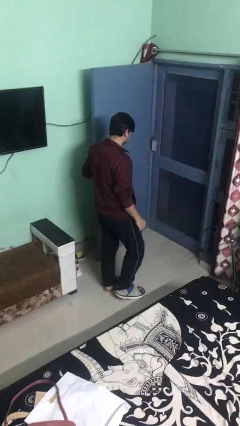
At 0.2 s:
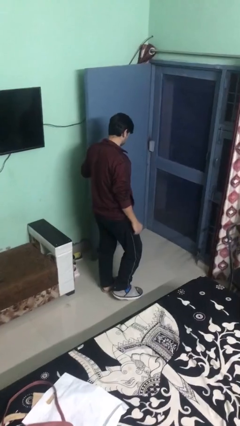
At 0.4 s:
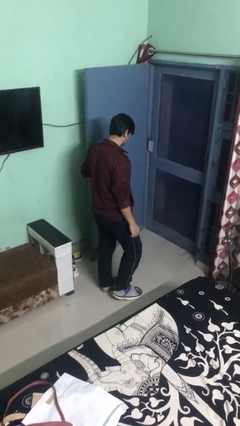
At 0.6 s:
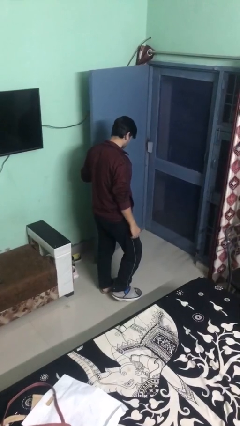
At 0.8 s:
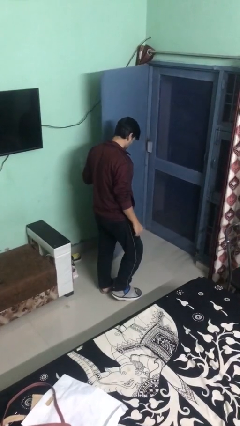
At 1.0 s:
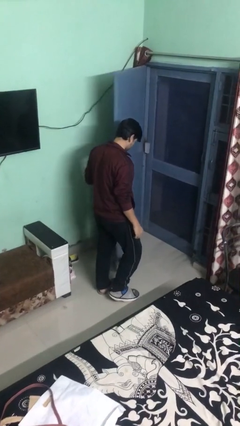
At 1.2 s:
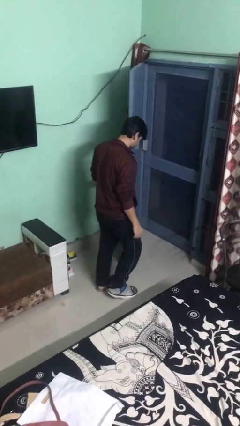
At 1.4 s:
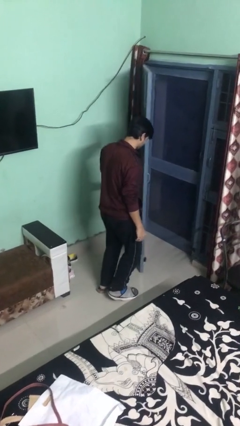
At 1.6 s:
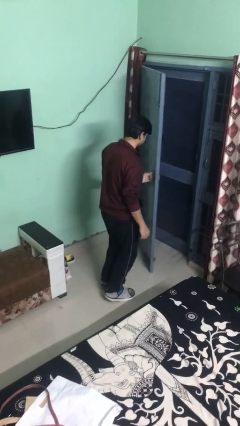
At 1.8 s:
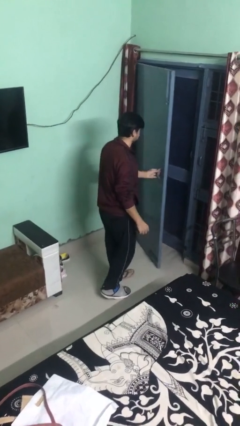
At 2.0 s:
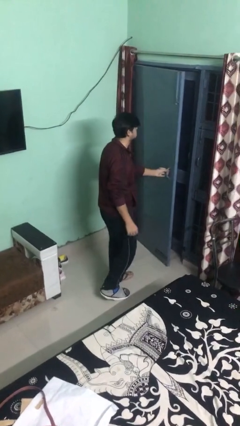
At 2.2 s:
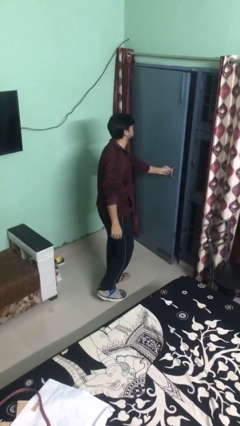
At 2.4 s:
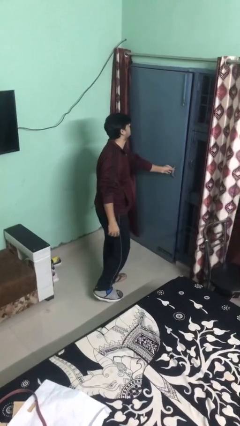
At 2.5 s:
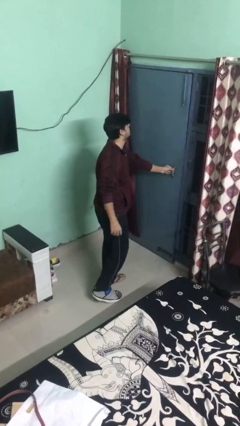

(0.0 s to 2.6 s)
person closes facility door

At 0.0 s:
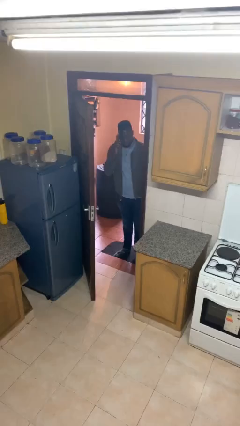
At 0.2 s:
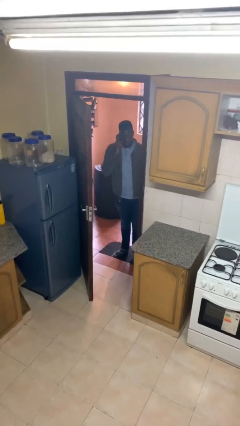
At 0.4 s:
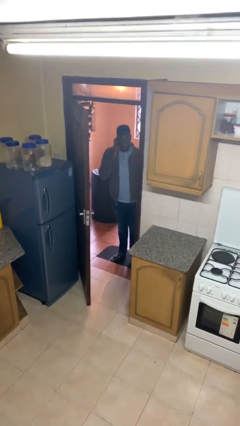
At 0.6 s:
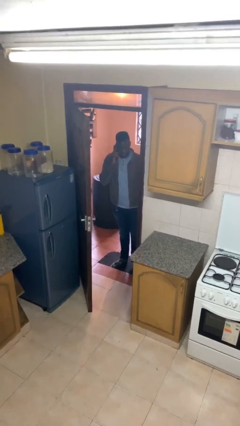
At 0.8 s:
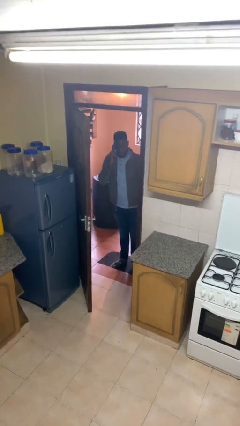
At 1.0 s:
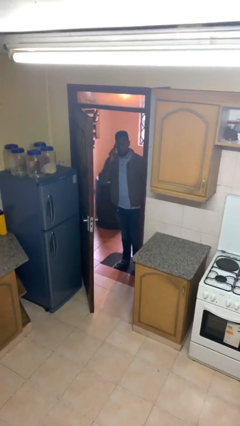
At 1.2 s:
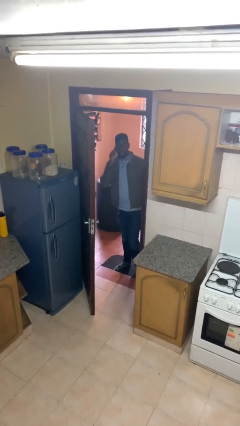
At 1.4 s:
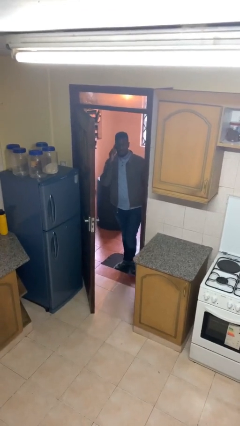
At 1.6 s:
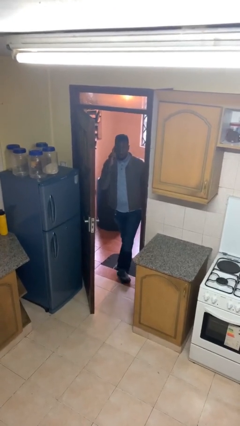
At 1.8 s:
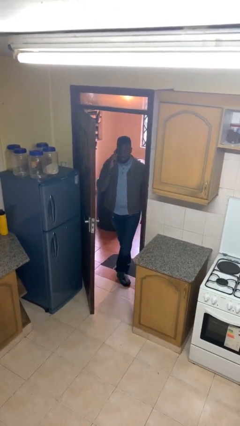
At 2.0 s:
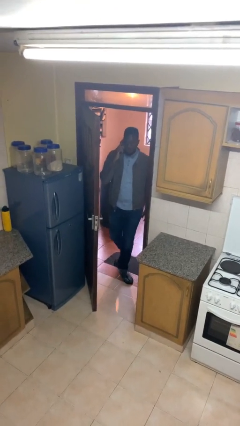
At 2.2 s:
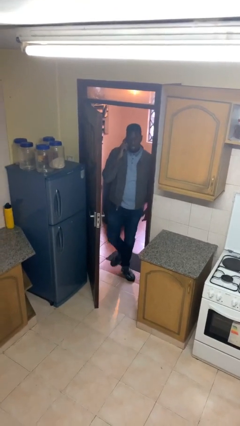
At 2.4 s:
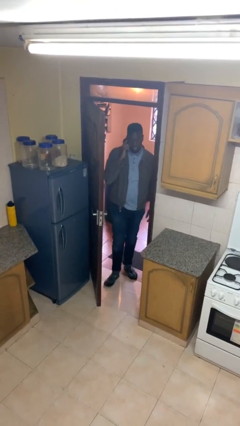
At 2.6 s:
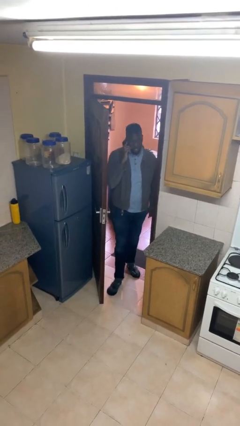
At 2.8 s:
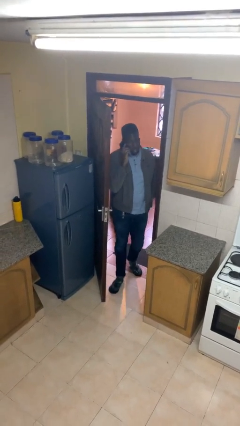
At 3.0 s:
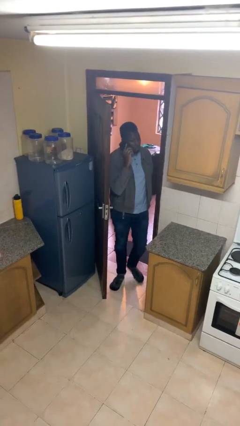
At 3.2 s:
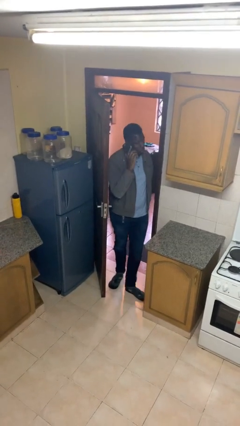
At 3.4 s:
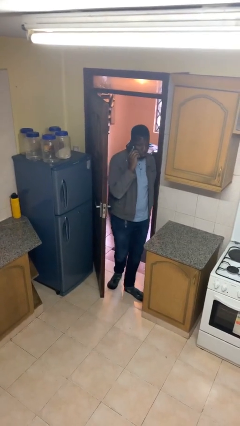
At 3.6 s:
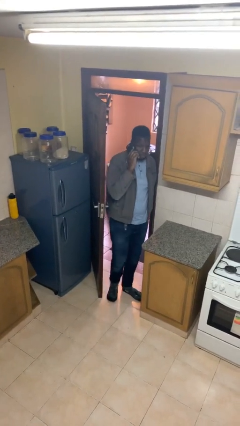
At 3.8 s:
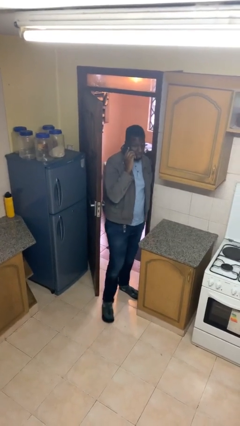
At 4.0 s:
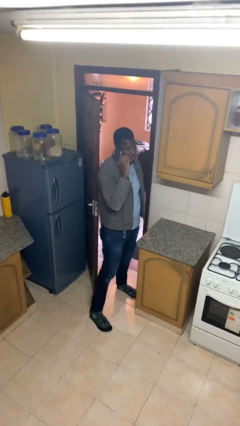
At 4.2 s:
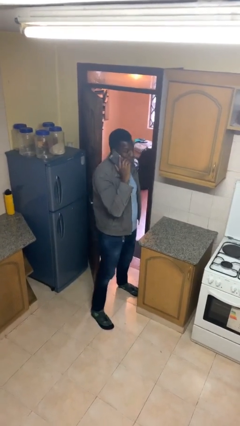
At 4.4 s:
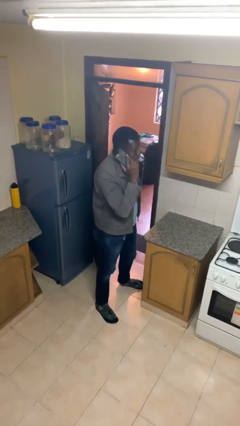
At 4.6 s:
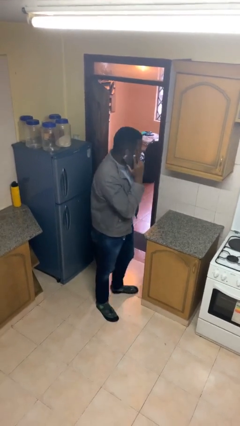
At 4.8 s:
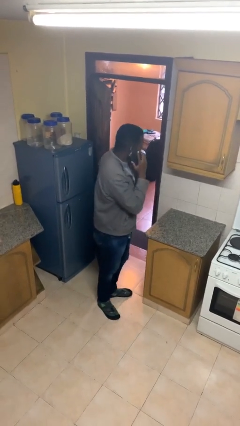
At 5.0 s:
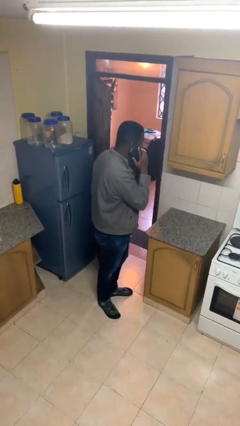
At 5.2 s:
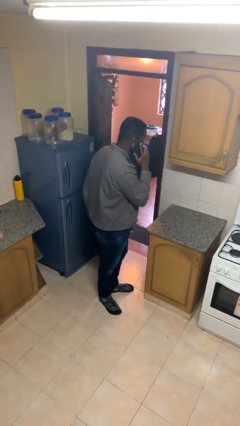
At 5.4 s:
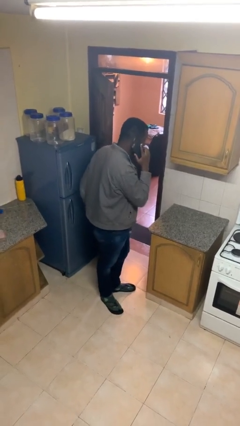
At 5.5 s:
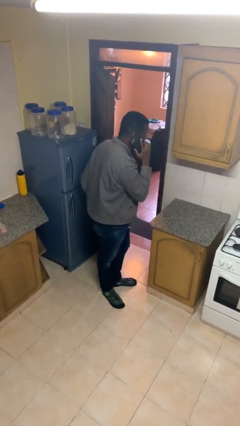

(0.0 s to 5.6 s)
person enters scene through structure

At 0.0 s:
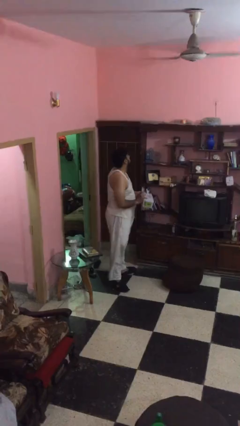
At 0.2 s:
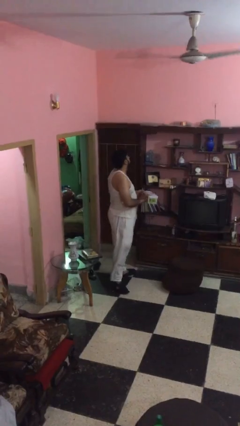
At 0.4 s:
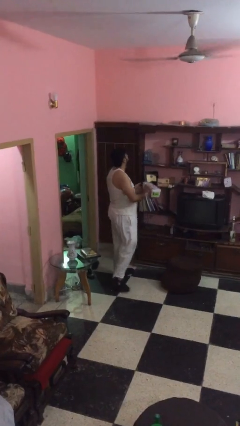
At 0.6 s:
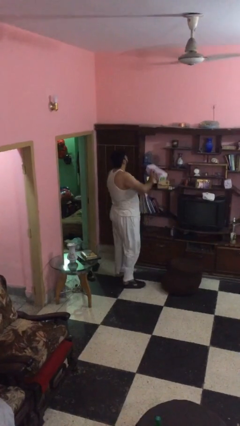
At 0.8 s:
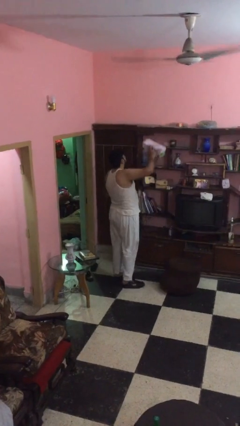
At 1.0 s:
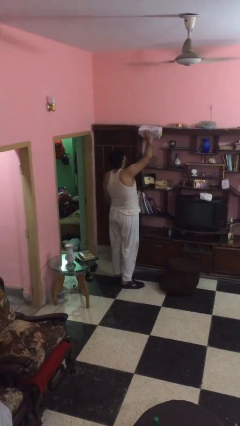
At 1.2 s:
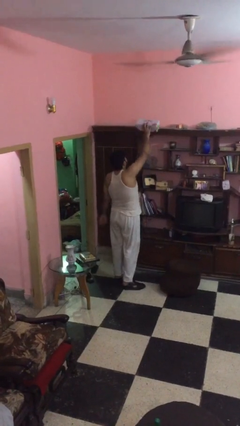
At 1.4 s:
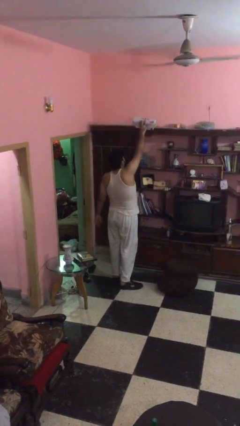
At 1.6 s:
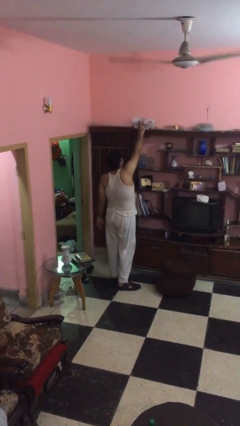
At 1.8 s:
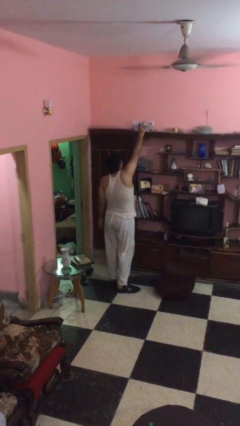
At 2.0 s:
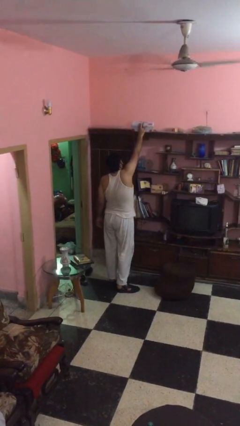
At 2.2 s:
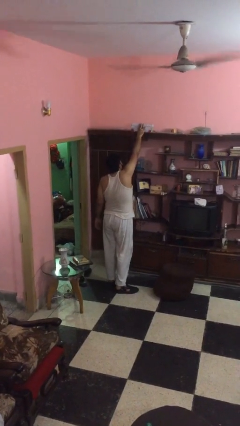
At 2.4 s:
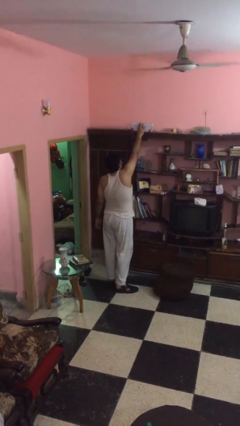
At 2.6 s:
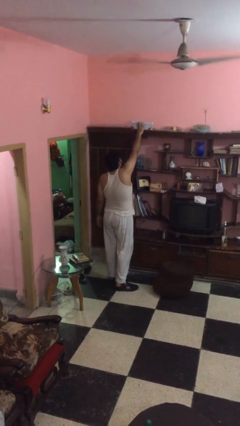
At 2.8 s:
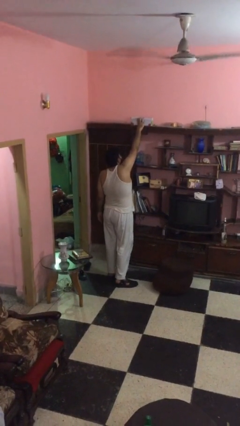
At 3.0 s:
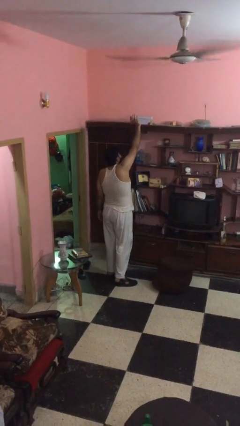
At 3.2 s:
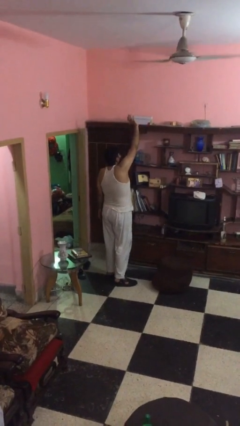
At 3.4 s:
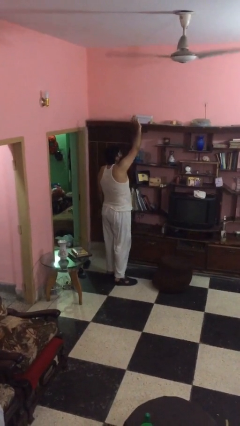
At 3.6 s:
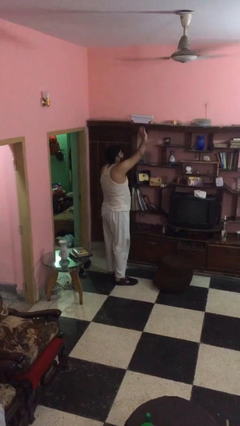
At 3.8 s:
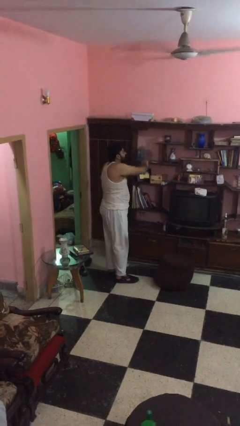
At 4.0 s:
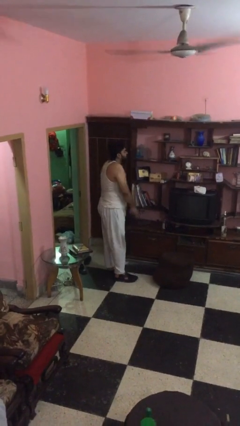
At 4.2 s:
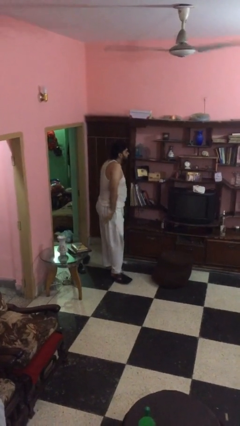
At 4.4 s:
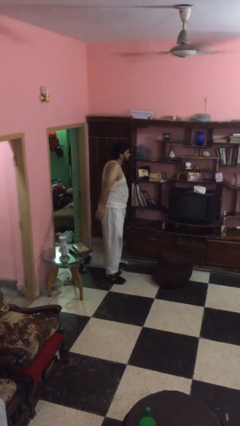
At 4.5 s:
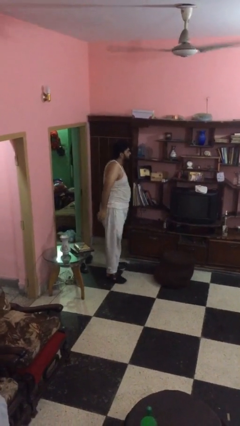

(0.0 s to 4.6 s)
person puts down object on shelf

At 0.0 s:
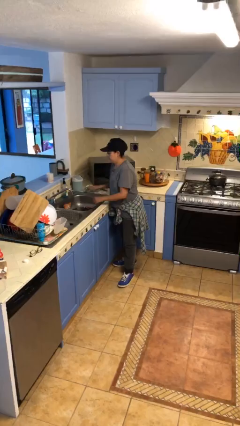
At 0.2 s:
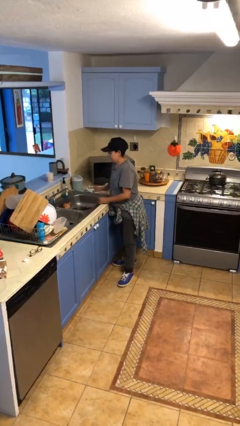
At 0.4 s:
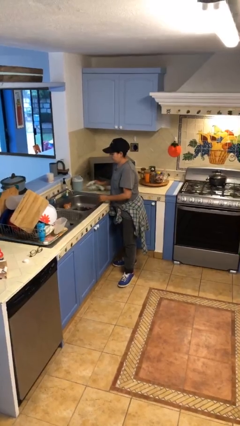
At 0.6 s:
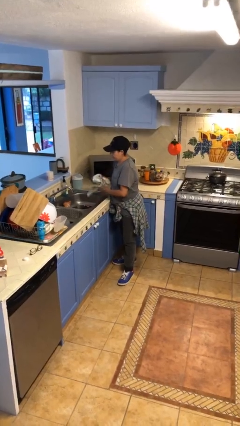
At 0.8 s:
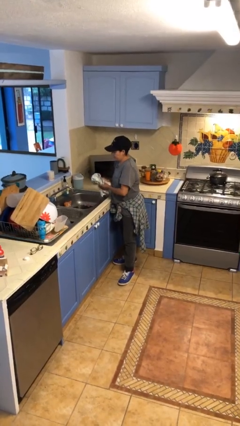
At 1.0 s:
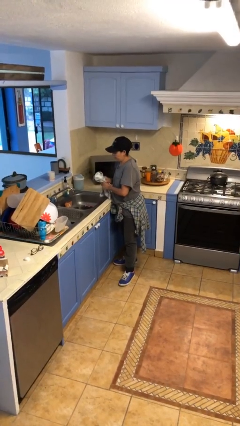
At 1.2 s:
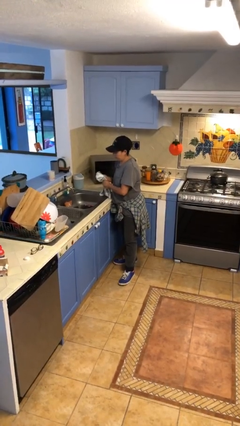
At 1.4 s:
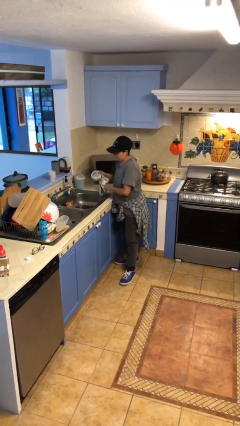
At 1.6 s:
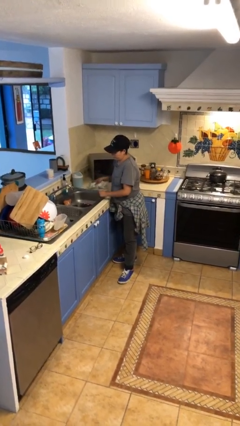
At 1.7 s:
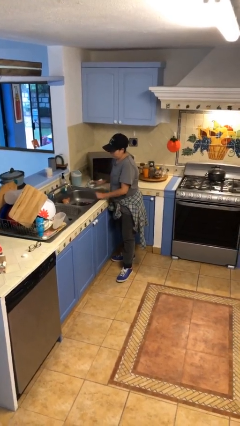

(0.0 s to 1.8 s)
person dries hands with towel

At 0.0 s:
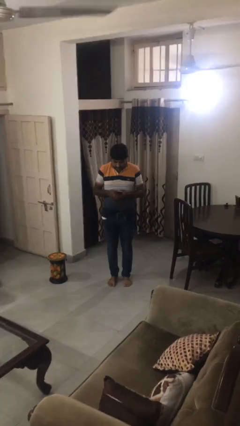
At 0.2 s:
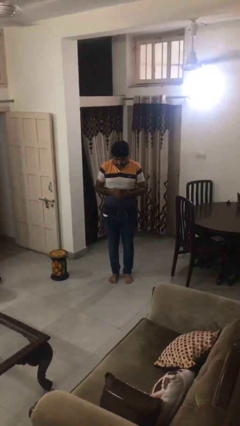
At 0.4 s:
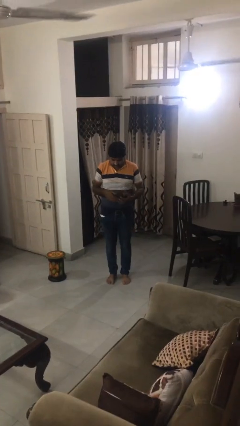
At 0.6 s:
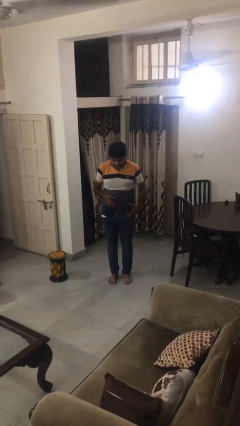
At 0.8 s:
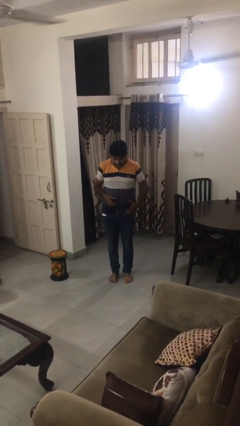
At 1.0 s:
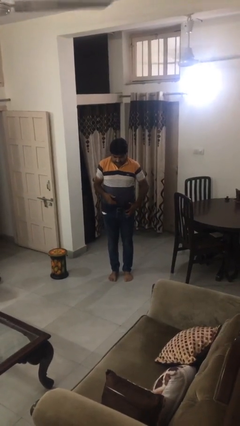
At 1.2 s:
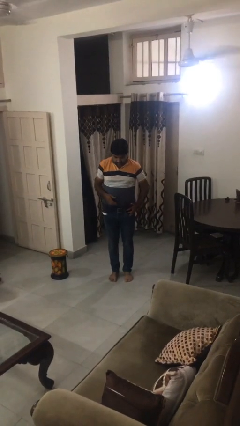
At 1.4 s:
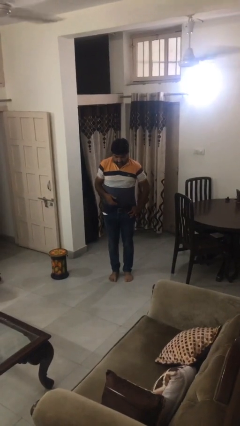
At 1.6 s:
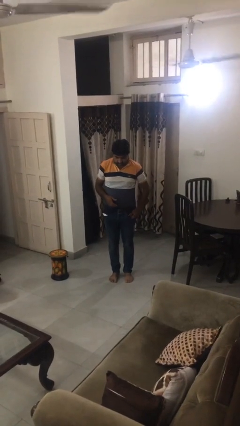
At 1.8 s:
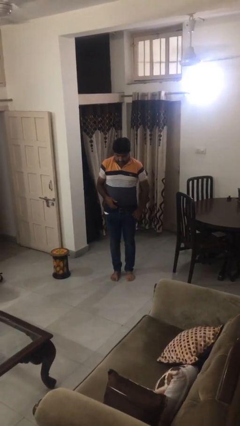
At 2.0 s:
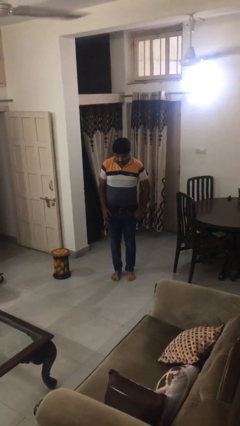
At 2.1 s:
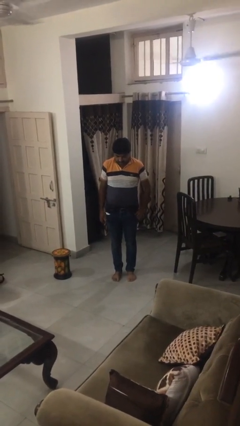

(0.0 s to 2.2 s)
person puts phone into pocket

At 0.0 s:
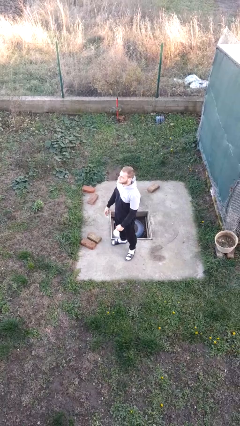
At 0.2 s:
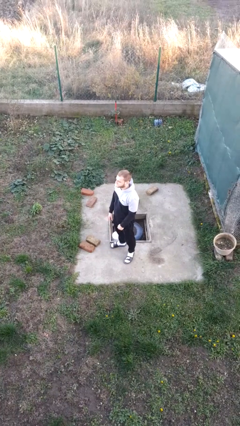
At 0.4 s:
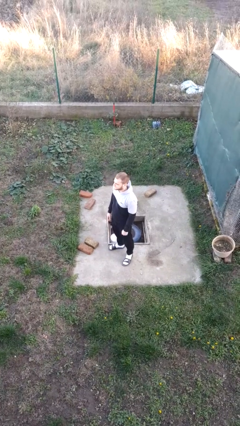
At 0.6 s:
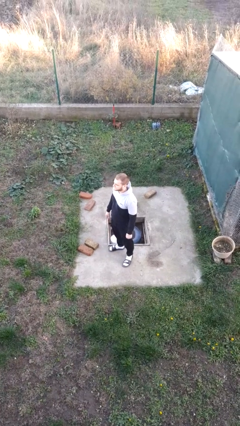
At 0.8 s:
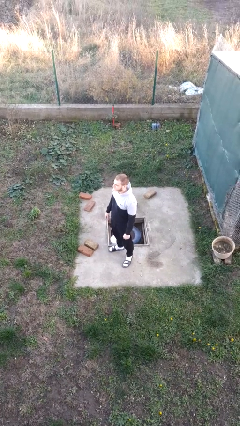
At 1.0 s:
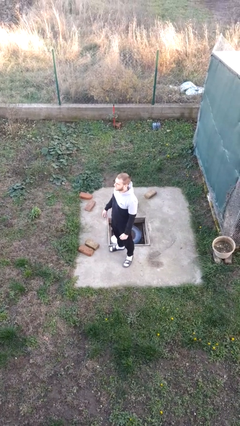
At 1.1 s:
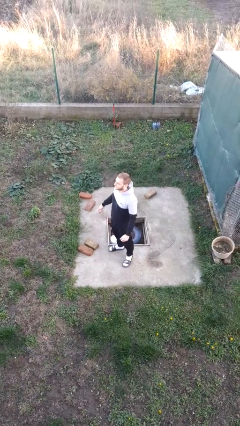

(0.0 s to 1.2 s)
person stretches back
